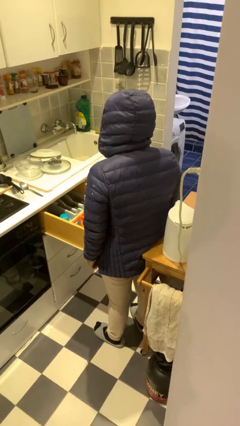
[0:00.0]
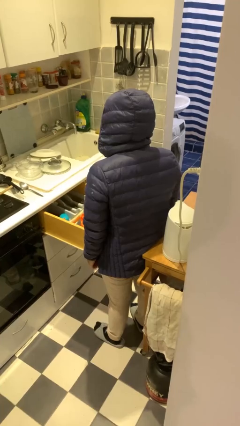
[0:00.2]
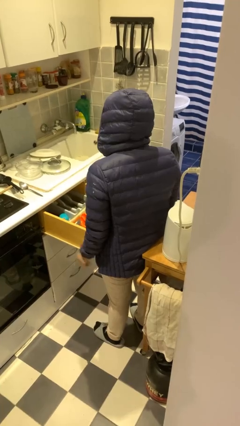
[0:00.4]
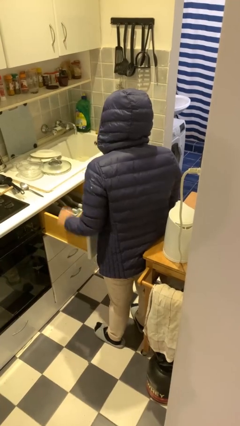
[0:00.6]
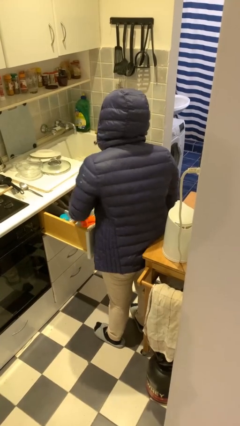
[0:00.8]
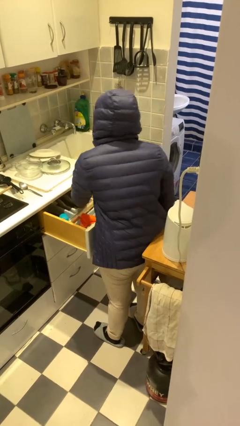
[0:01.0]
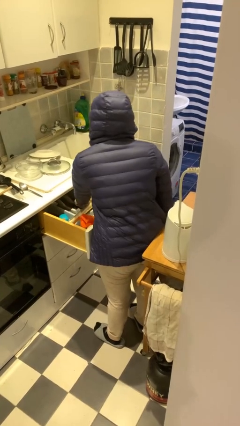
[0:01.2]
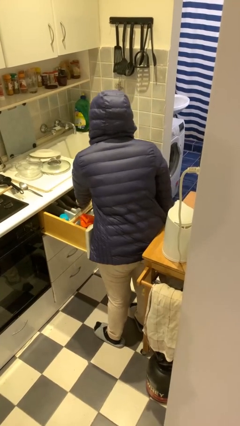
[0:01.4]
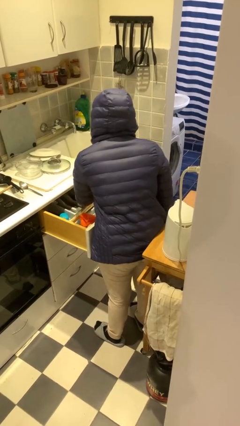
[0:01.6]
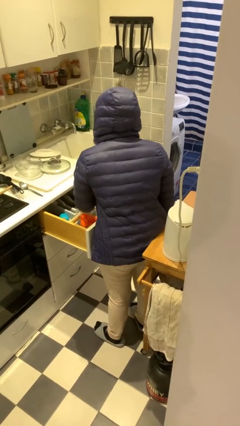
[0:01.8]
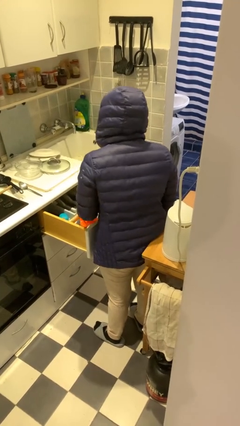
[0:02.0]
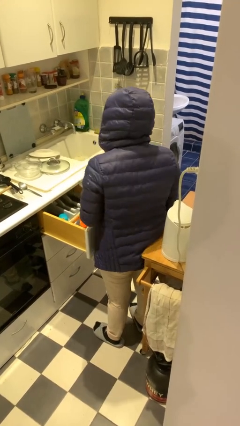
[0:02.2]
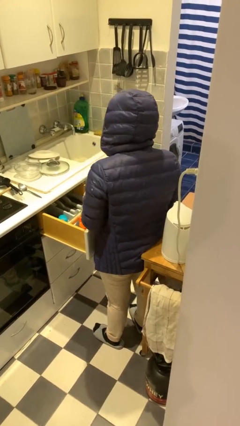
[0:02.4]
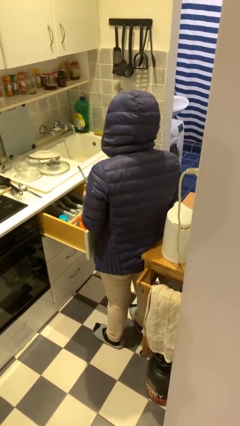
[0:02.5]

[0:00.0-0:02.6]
person takes object from kitchen drawer

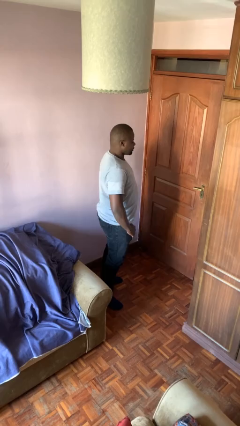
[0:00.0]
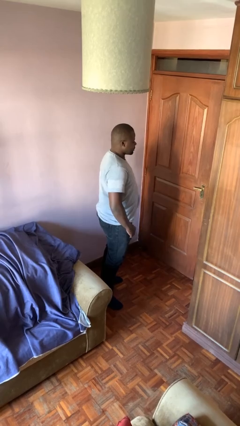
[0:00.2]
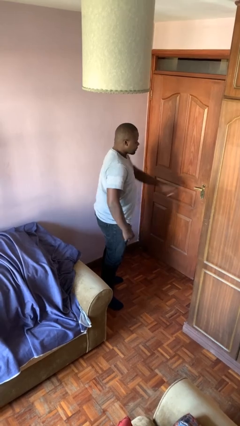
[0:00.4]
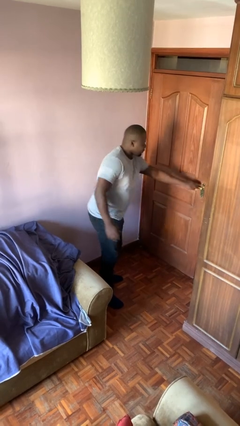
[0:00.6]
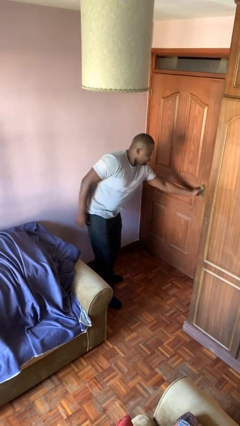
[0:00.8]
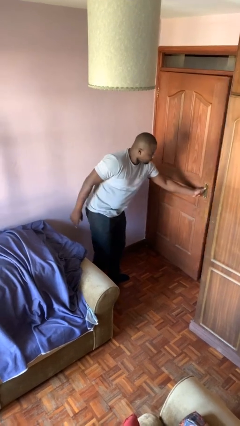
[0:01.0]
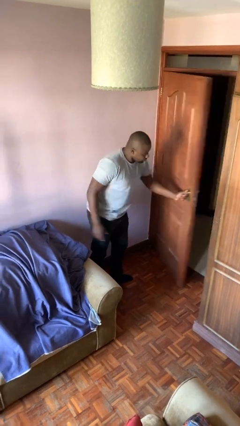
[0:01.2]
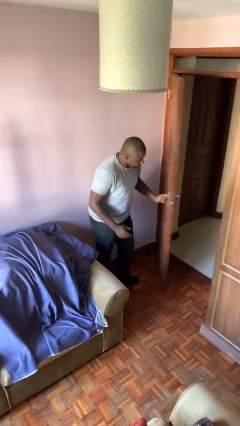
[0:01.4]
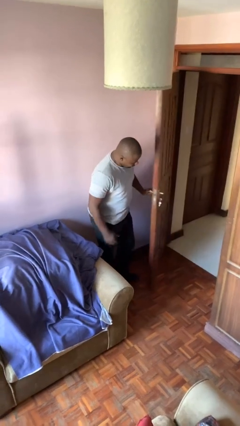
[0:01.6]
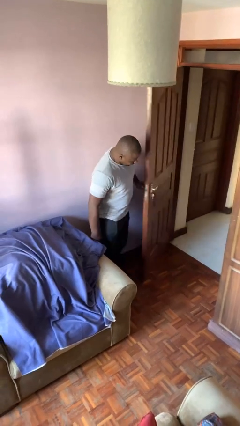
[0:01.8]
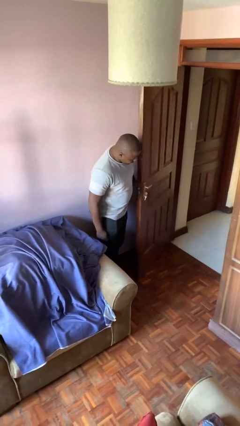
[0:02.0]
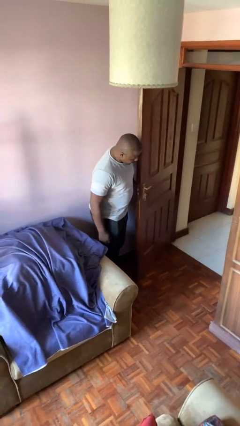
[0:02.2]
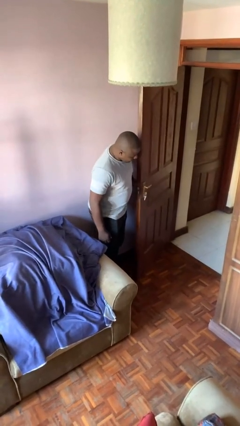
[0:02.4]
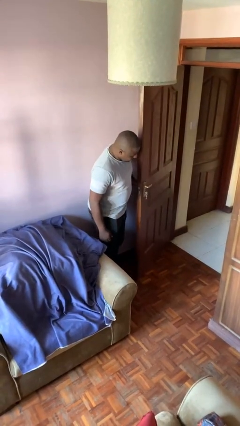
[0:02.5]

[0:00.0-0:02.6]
person opens facility door

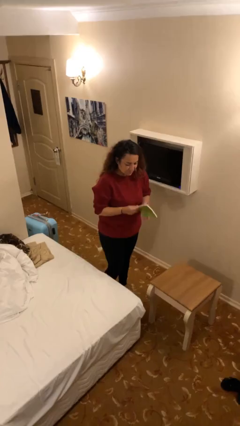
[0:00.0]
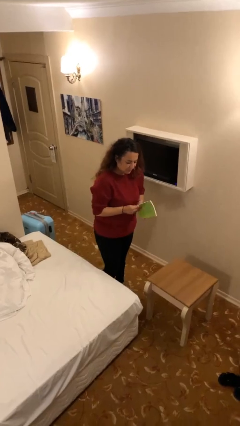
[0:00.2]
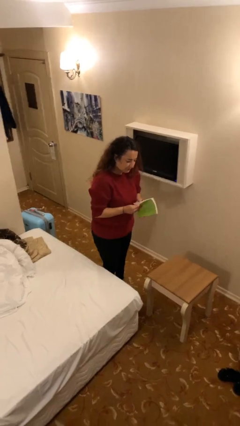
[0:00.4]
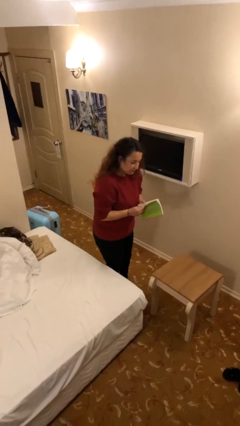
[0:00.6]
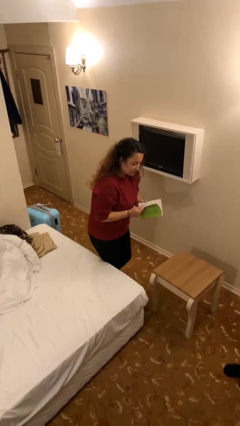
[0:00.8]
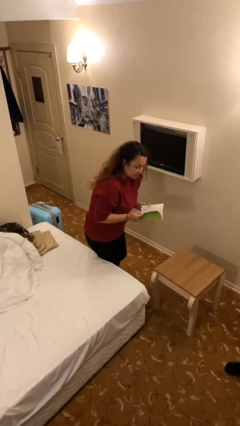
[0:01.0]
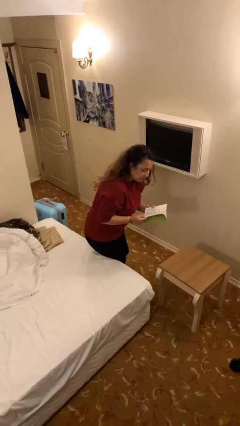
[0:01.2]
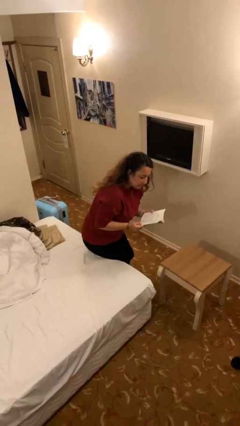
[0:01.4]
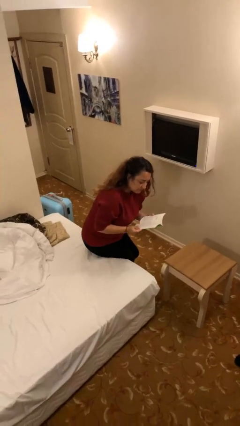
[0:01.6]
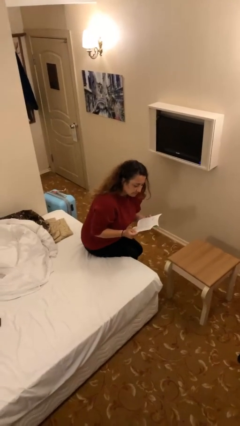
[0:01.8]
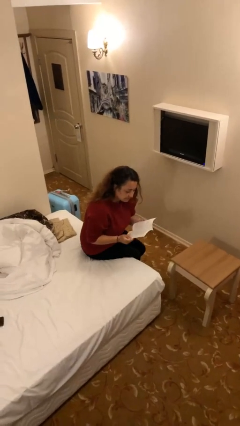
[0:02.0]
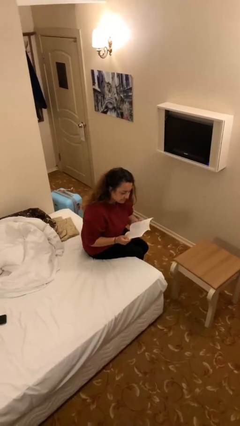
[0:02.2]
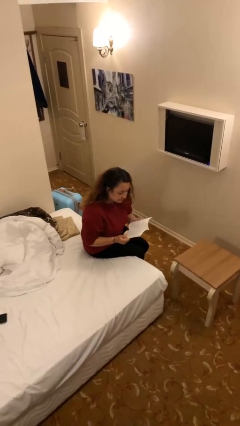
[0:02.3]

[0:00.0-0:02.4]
person sits down

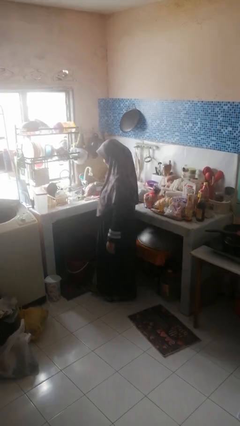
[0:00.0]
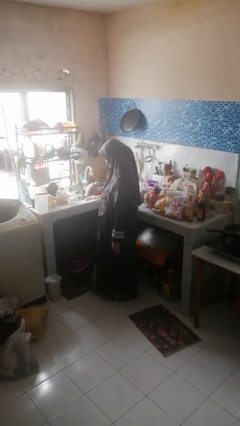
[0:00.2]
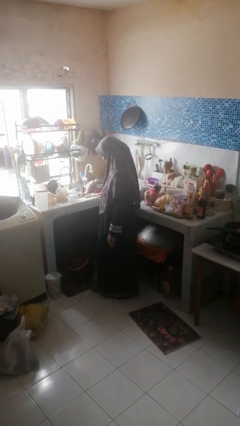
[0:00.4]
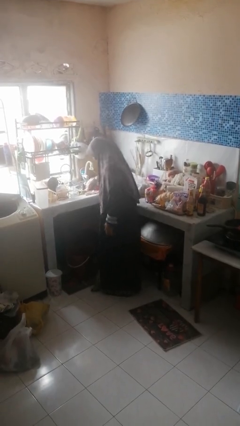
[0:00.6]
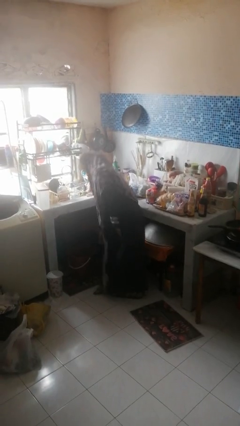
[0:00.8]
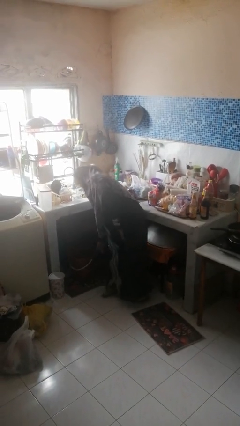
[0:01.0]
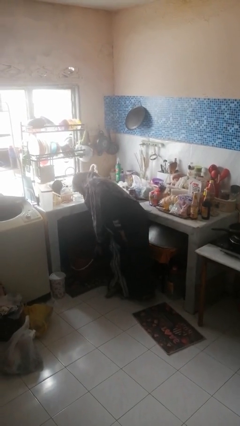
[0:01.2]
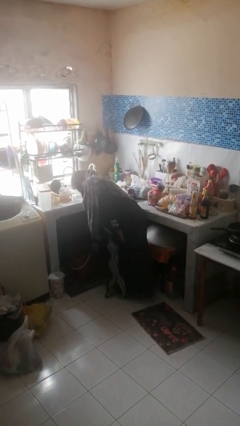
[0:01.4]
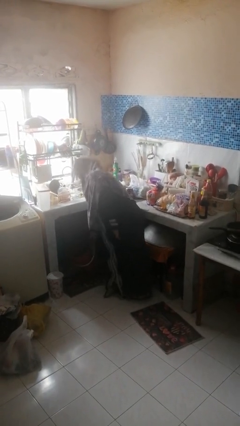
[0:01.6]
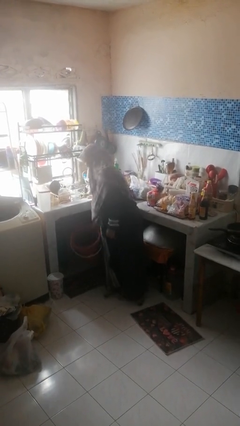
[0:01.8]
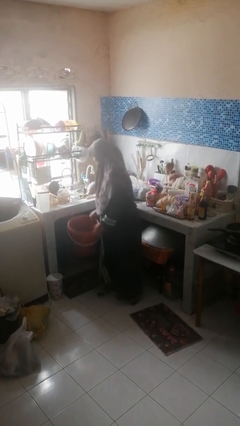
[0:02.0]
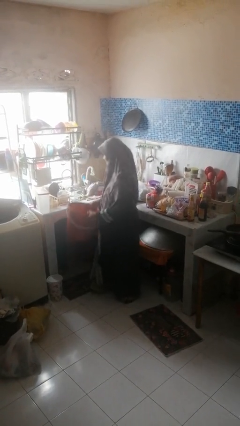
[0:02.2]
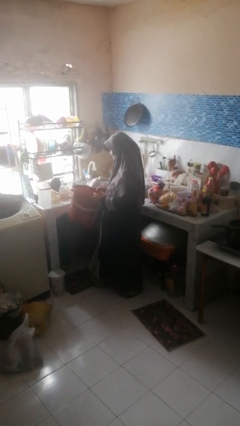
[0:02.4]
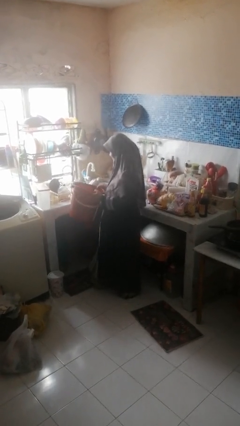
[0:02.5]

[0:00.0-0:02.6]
person picks up object from cabinet

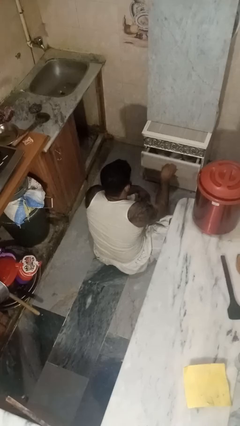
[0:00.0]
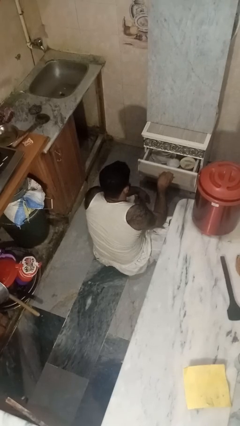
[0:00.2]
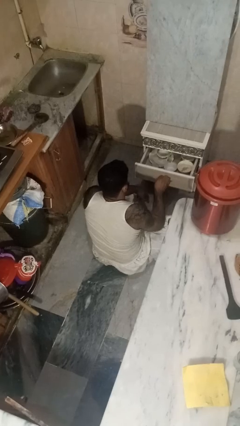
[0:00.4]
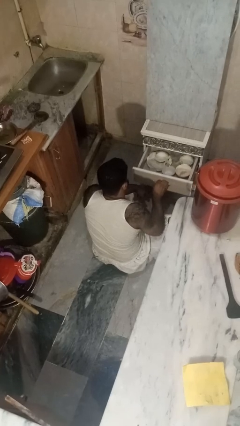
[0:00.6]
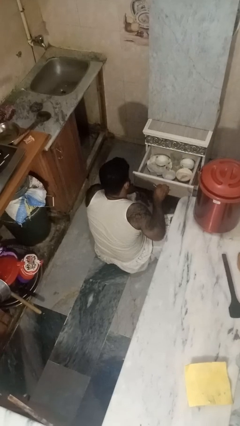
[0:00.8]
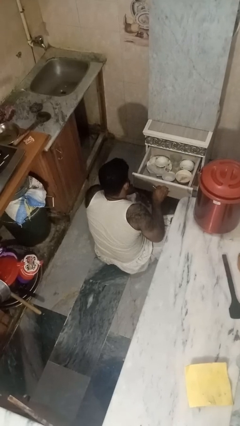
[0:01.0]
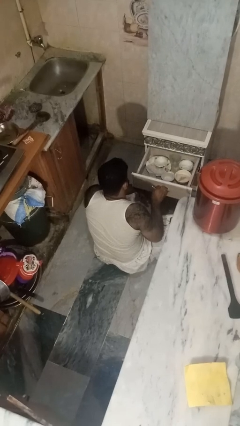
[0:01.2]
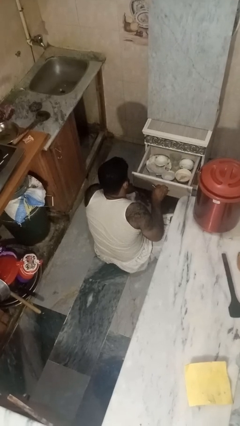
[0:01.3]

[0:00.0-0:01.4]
person opens kitchen drawer

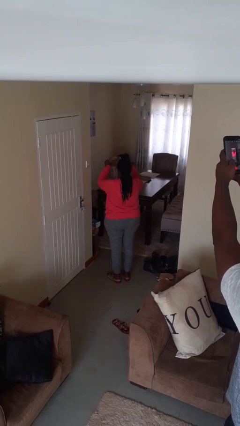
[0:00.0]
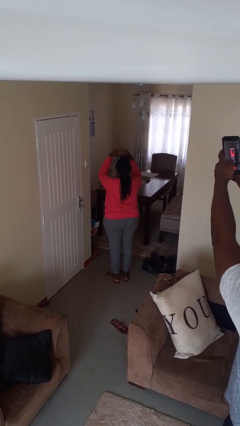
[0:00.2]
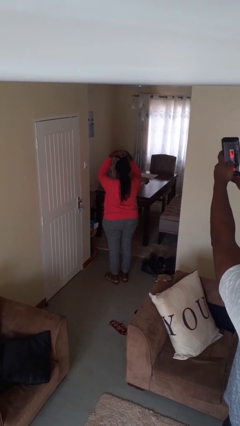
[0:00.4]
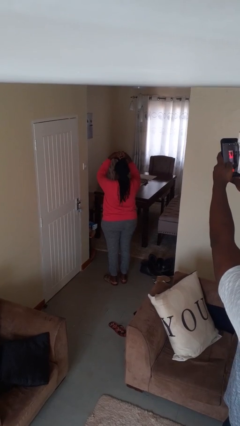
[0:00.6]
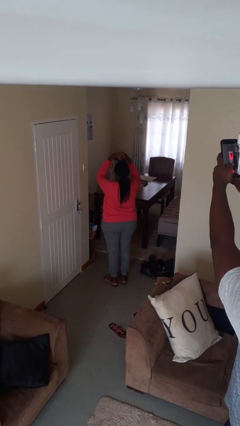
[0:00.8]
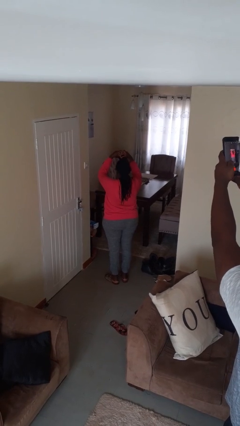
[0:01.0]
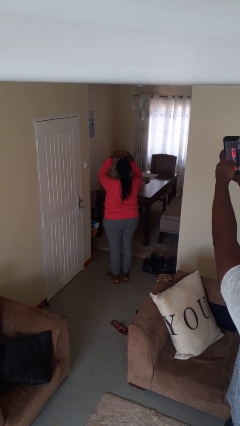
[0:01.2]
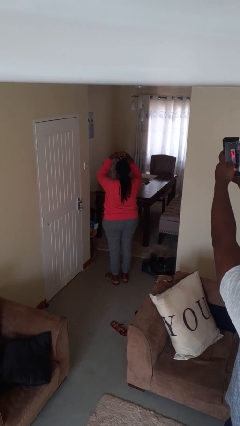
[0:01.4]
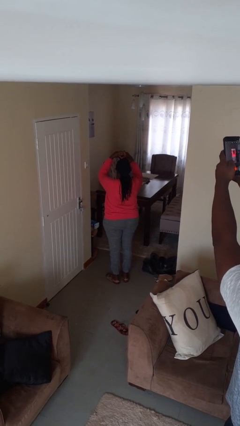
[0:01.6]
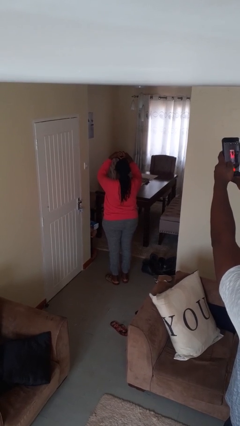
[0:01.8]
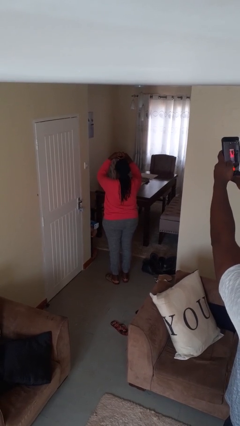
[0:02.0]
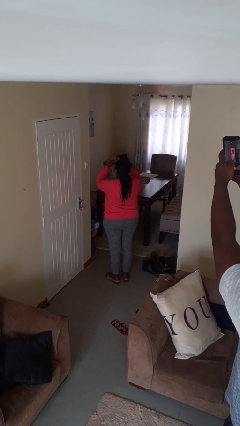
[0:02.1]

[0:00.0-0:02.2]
person gestures heart

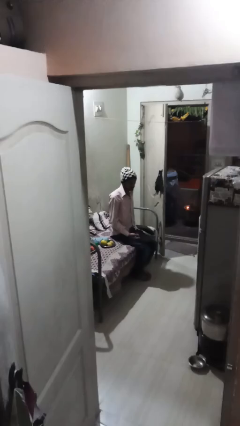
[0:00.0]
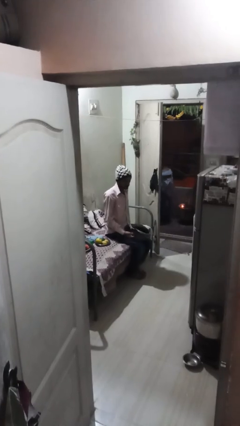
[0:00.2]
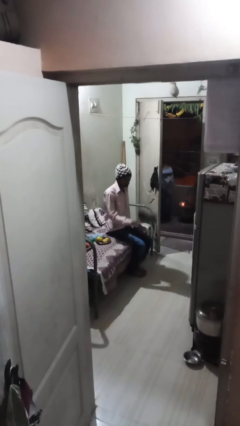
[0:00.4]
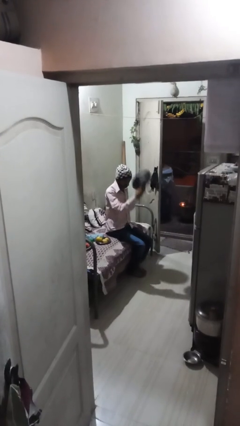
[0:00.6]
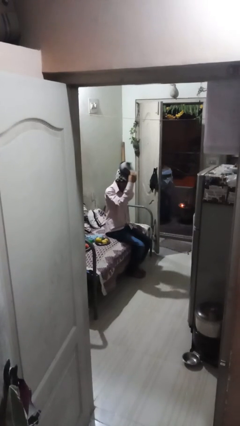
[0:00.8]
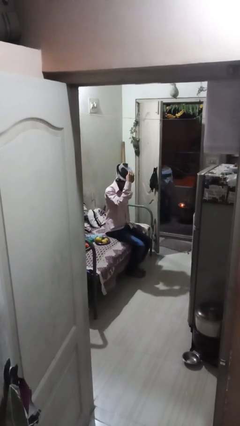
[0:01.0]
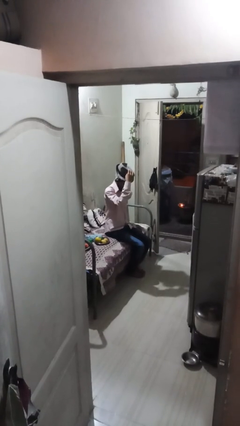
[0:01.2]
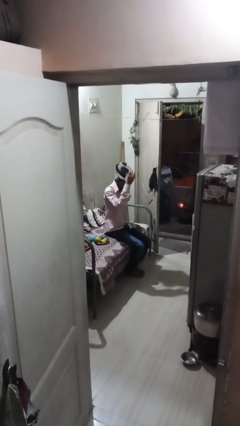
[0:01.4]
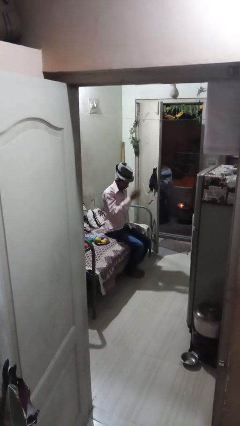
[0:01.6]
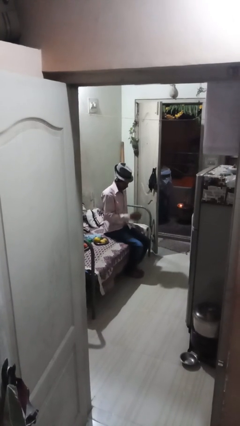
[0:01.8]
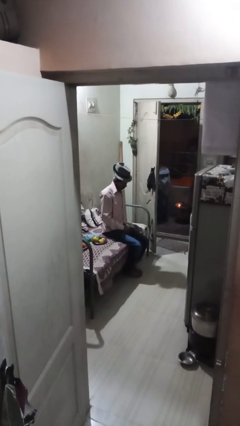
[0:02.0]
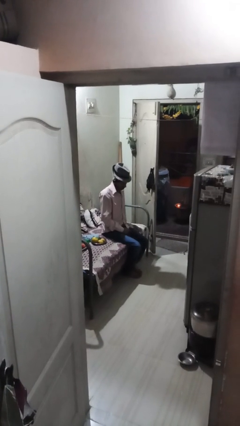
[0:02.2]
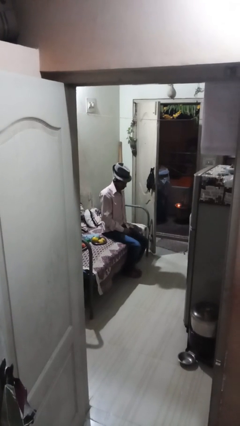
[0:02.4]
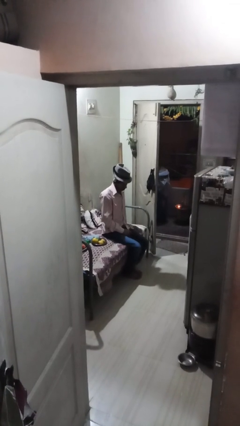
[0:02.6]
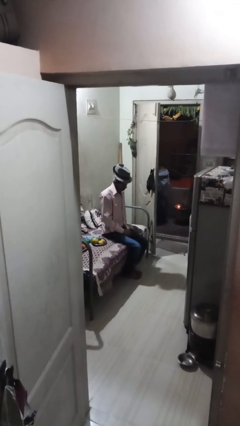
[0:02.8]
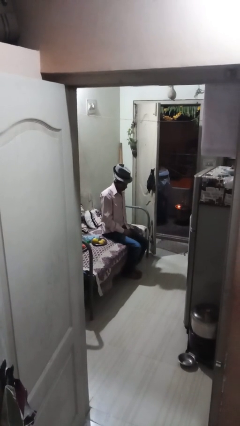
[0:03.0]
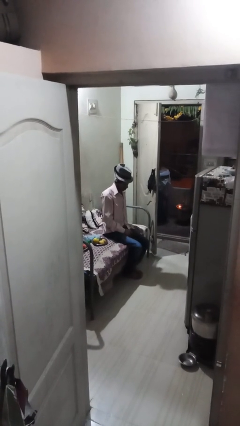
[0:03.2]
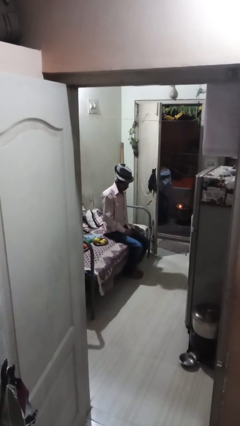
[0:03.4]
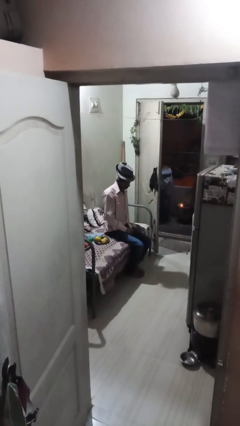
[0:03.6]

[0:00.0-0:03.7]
person puts on hat
